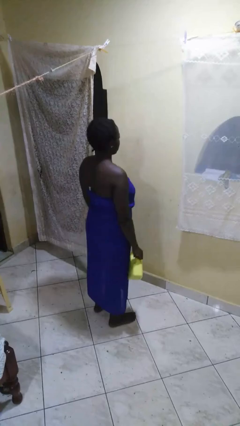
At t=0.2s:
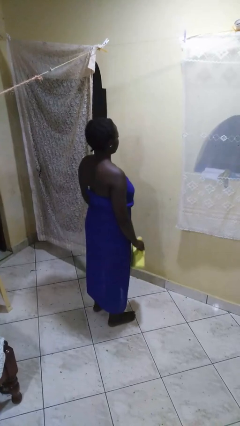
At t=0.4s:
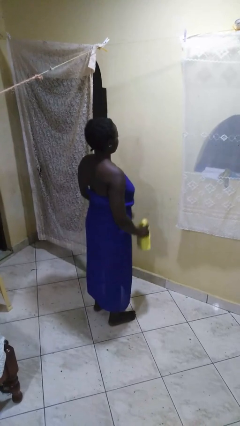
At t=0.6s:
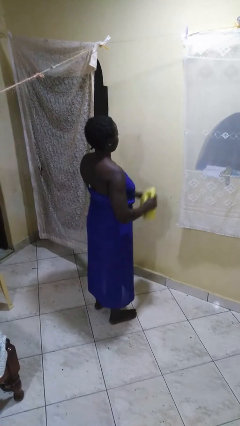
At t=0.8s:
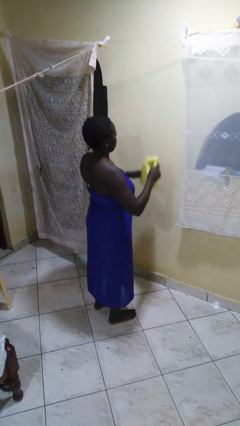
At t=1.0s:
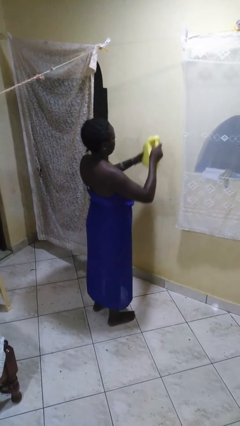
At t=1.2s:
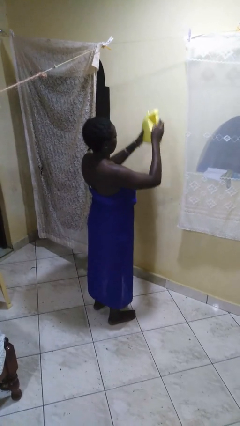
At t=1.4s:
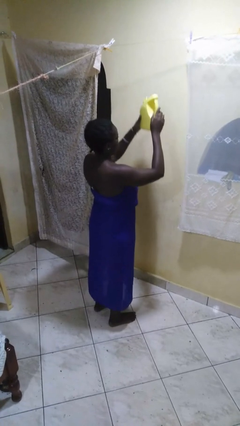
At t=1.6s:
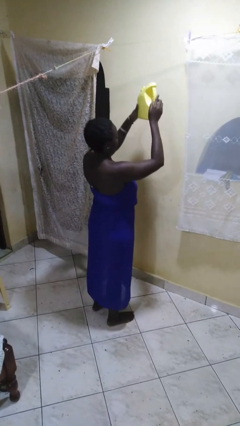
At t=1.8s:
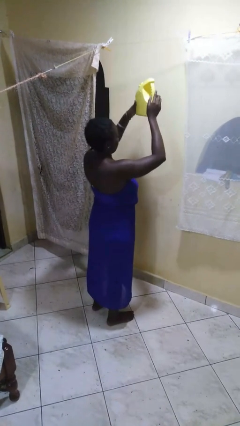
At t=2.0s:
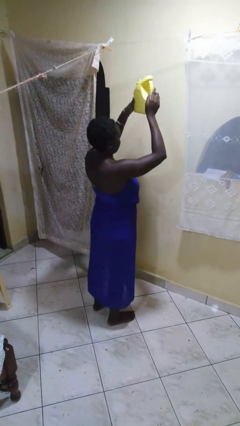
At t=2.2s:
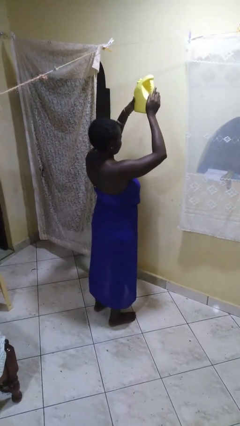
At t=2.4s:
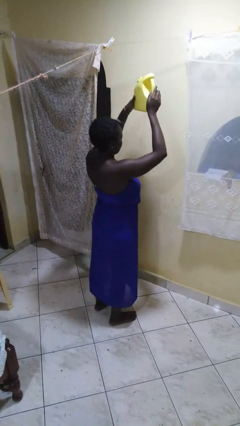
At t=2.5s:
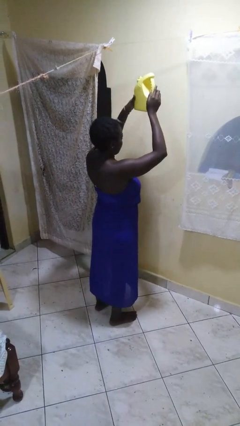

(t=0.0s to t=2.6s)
person holds object above head

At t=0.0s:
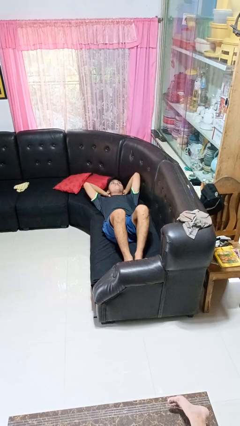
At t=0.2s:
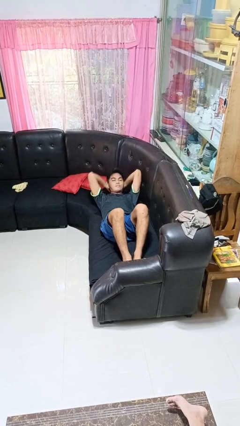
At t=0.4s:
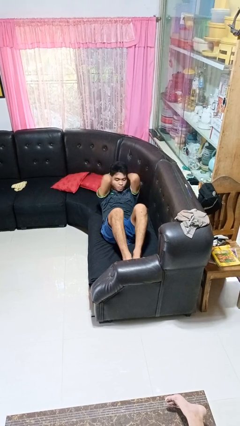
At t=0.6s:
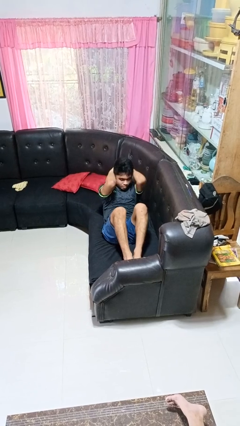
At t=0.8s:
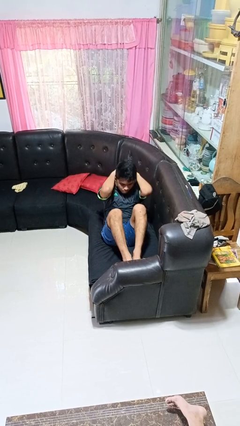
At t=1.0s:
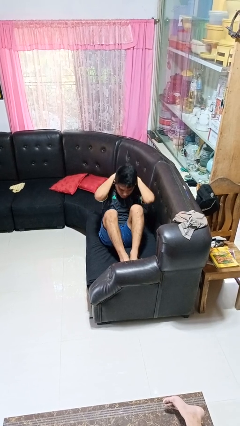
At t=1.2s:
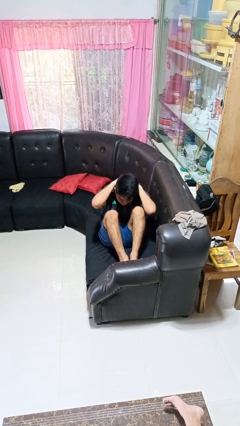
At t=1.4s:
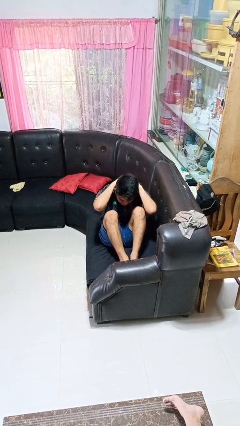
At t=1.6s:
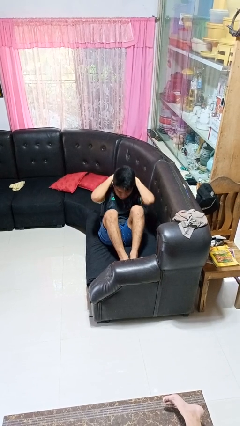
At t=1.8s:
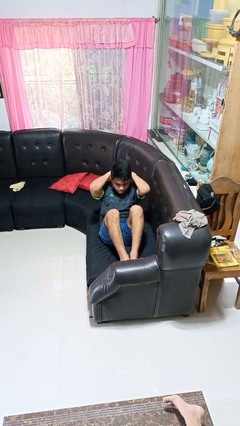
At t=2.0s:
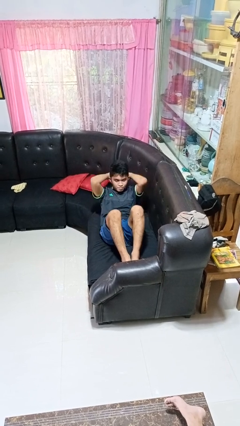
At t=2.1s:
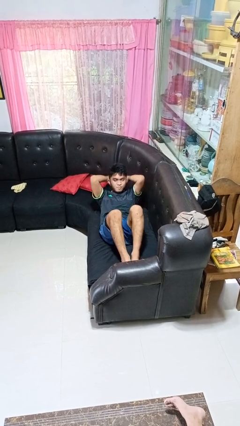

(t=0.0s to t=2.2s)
person exercises with situp

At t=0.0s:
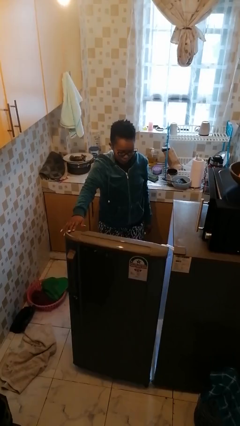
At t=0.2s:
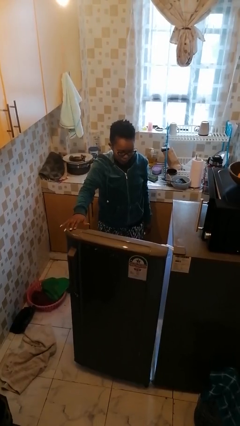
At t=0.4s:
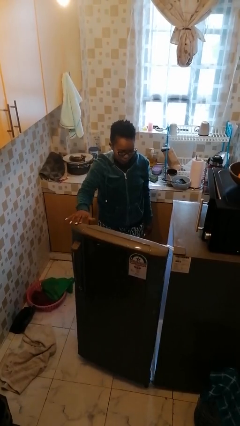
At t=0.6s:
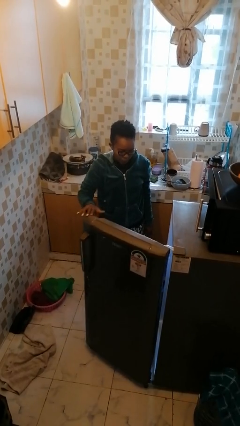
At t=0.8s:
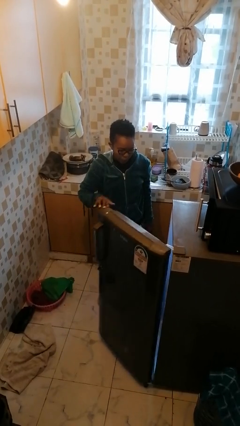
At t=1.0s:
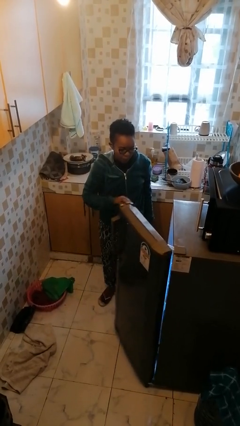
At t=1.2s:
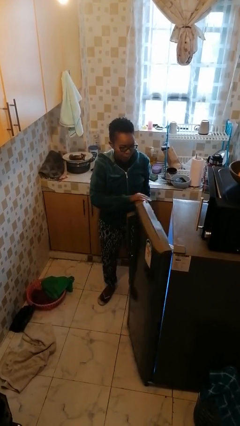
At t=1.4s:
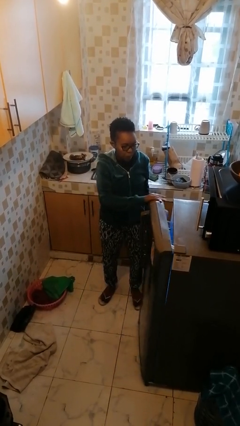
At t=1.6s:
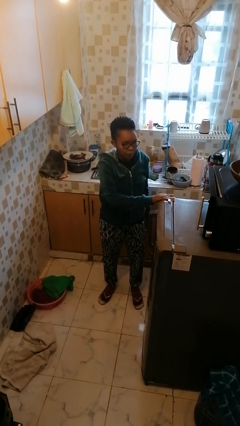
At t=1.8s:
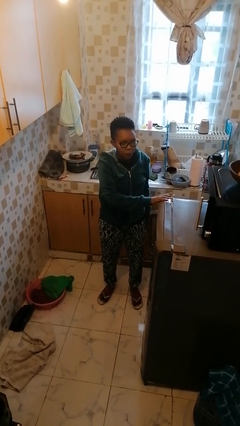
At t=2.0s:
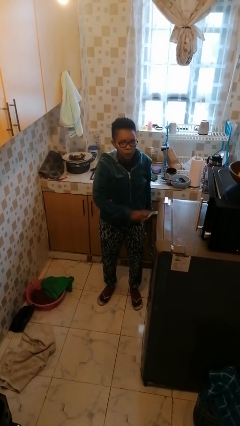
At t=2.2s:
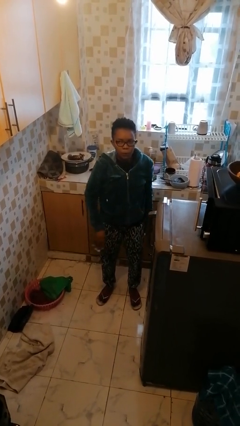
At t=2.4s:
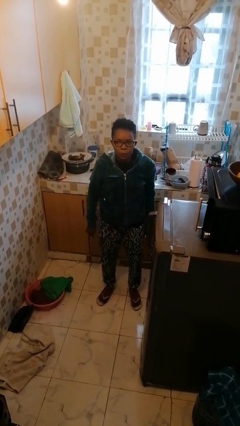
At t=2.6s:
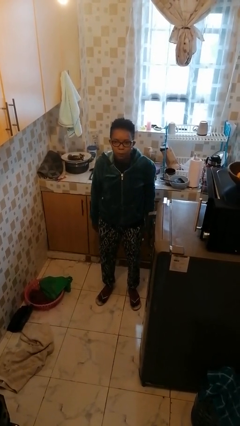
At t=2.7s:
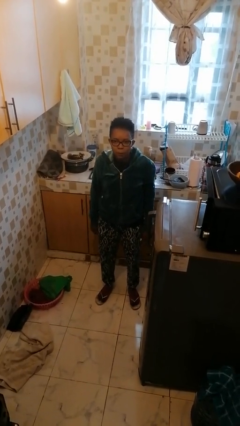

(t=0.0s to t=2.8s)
person closes refrigerator

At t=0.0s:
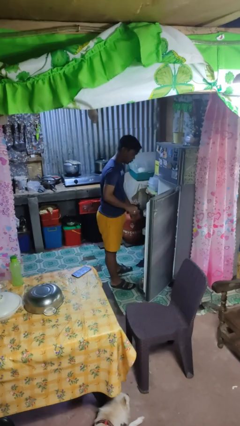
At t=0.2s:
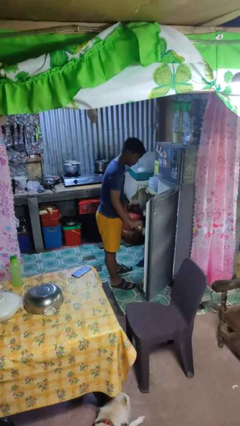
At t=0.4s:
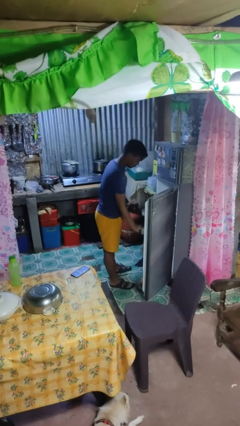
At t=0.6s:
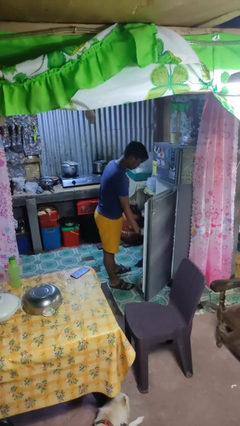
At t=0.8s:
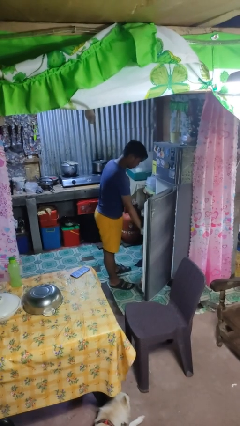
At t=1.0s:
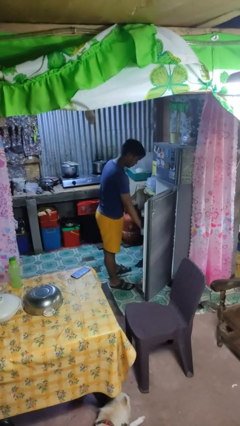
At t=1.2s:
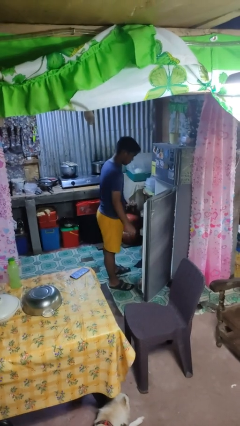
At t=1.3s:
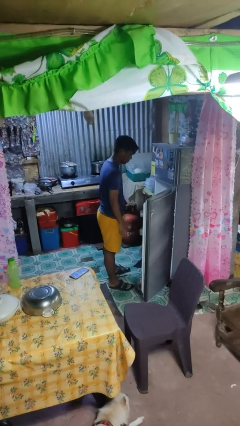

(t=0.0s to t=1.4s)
person puts object into refrigerator

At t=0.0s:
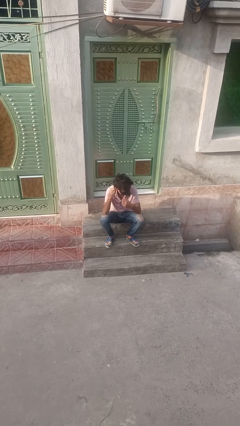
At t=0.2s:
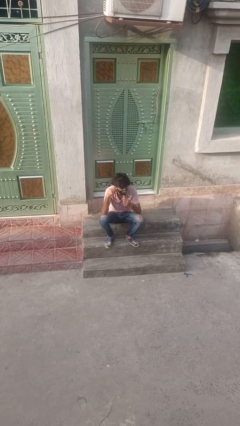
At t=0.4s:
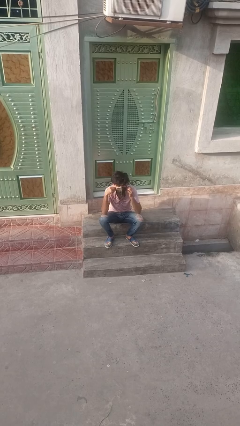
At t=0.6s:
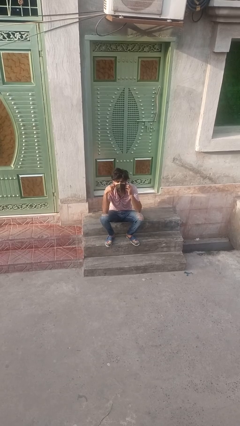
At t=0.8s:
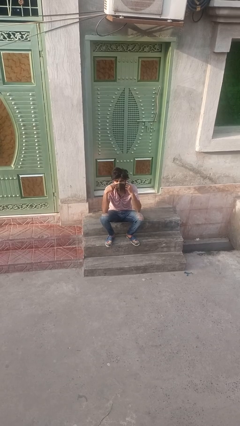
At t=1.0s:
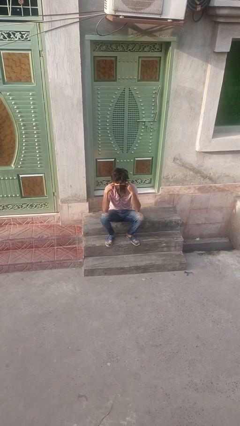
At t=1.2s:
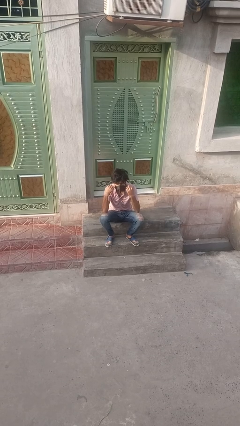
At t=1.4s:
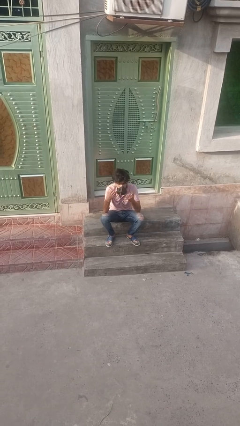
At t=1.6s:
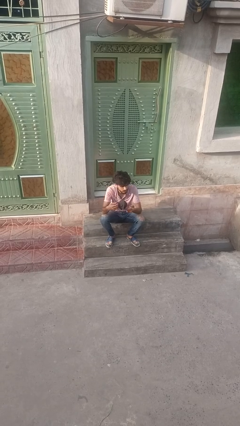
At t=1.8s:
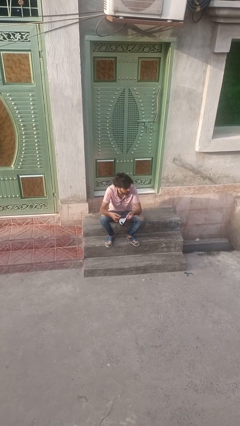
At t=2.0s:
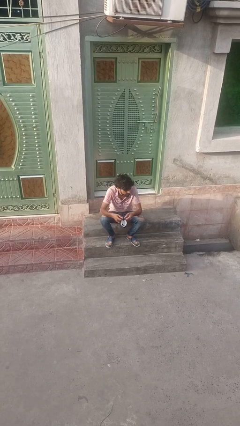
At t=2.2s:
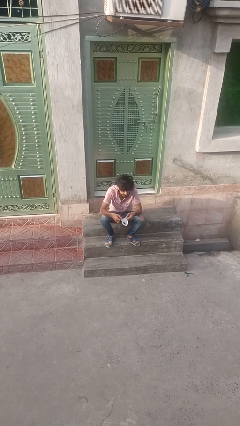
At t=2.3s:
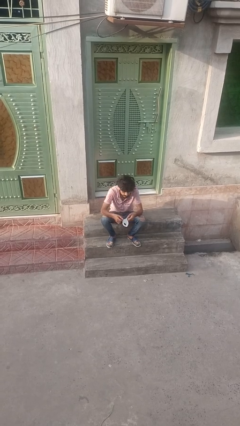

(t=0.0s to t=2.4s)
person takes off facemask

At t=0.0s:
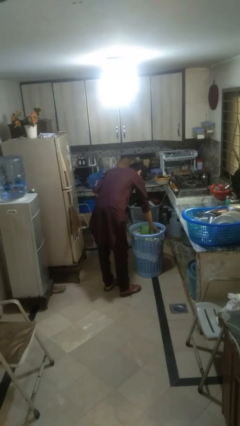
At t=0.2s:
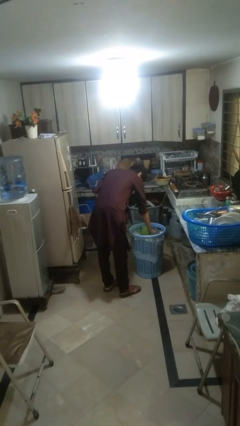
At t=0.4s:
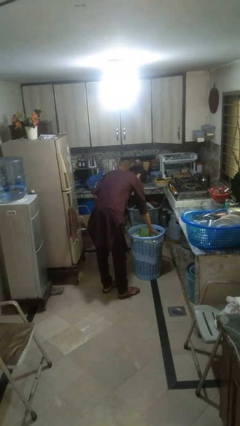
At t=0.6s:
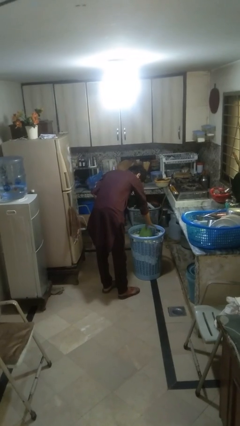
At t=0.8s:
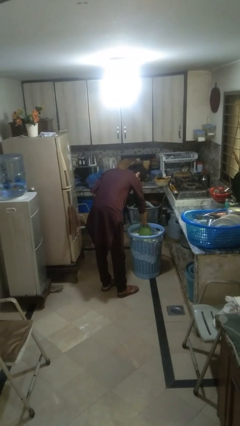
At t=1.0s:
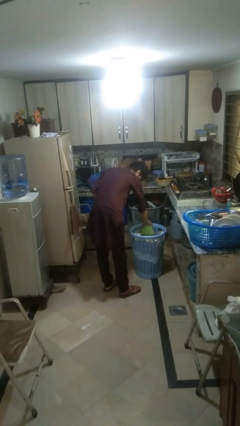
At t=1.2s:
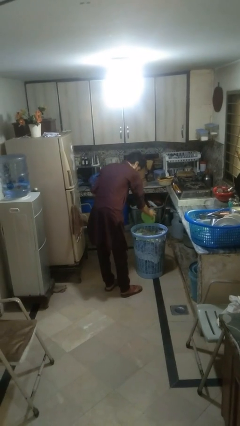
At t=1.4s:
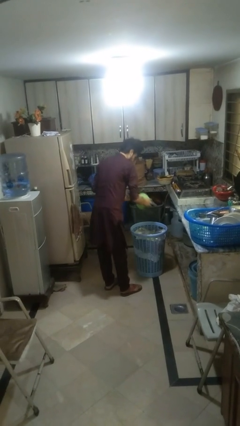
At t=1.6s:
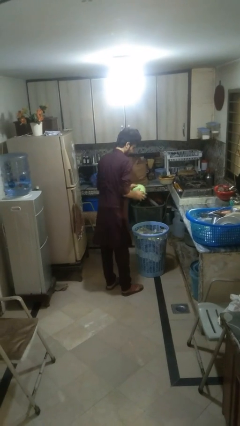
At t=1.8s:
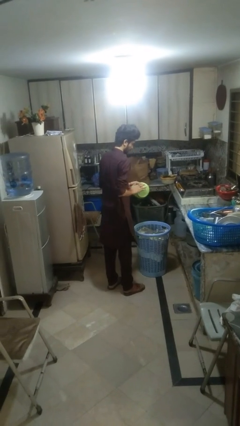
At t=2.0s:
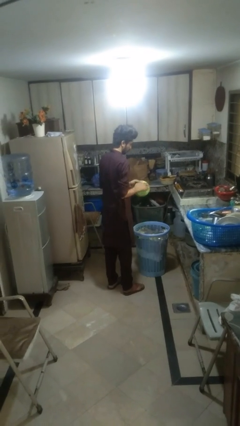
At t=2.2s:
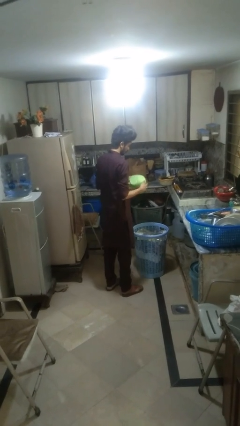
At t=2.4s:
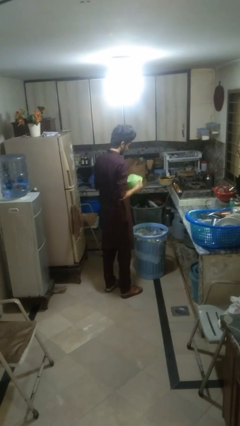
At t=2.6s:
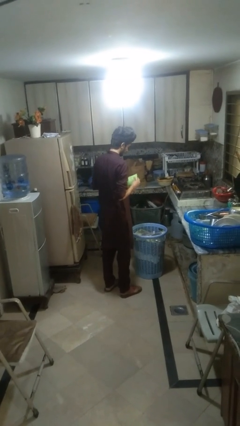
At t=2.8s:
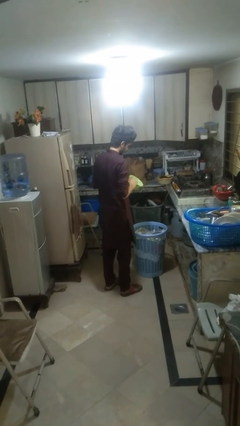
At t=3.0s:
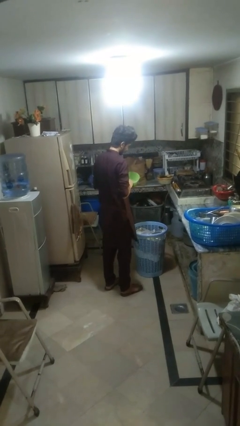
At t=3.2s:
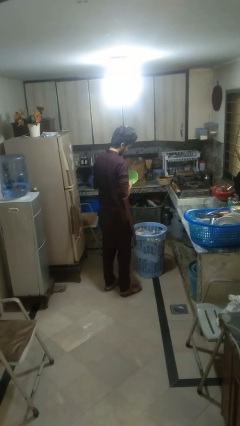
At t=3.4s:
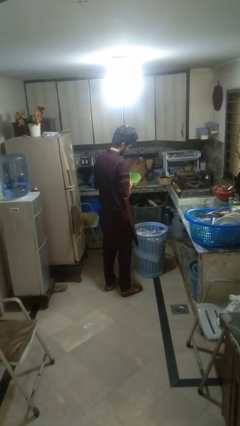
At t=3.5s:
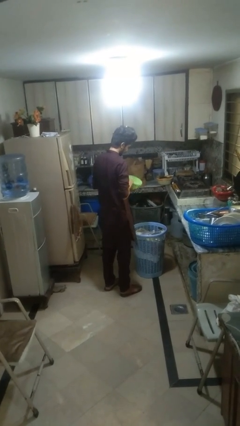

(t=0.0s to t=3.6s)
person takes object from basket

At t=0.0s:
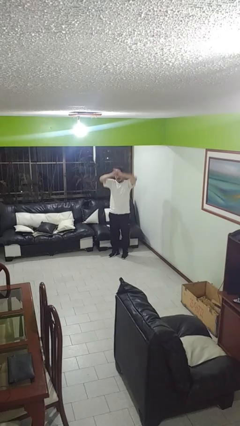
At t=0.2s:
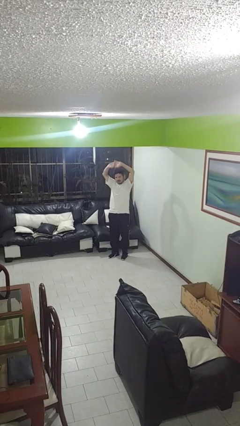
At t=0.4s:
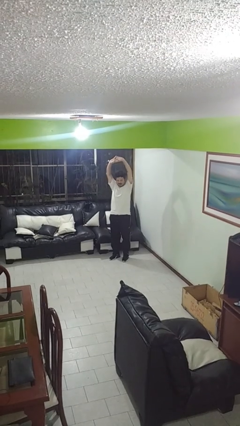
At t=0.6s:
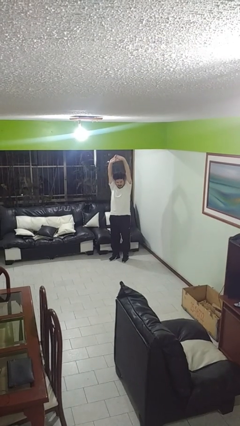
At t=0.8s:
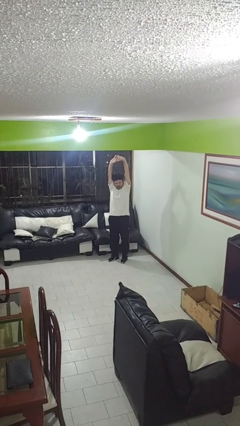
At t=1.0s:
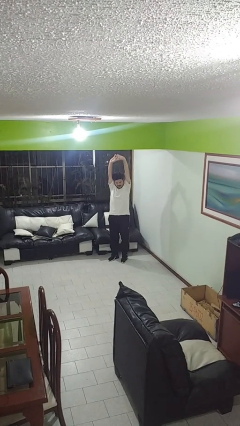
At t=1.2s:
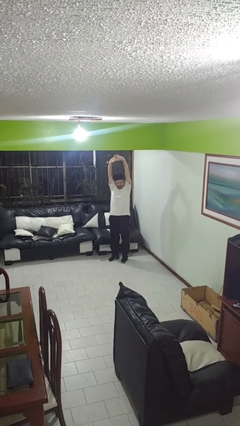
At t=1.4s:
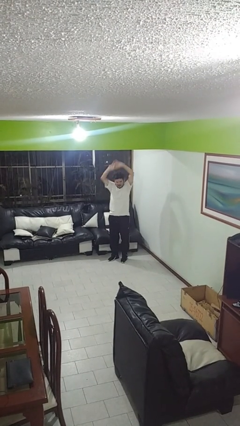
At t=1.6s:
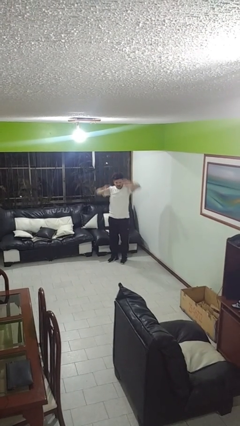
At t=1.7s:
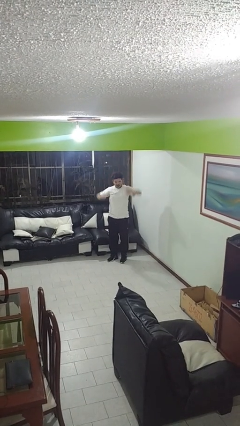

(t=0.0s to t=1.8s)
person stretches arms over head

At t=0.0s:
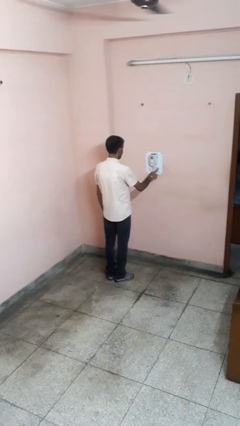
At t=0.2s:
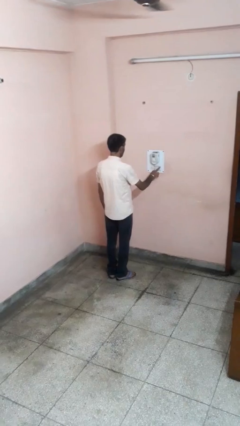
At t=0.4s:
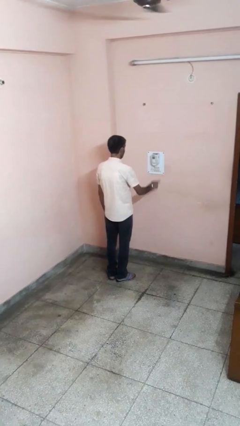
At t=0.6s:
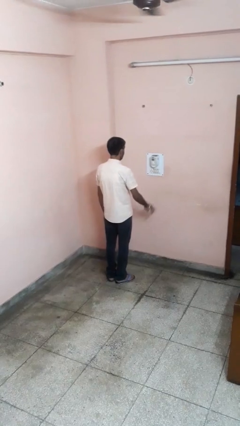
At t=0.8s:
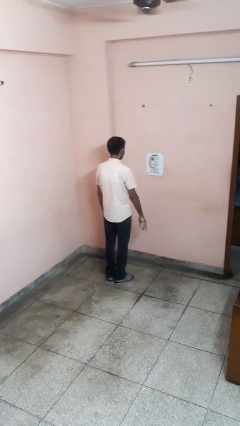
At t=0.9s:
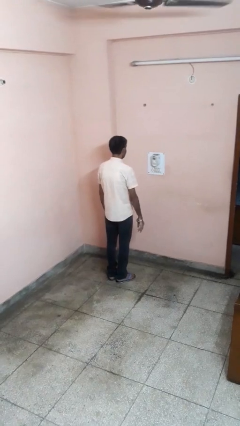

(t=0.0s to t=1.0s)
person turns off fan
